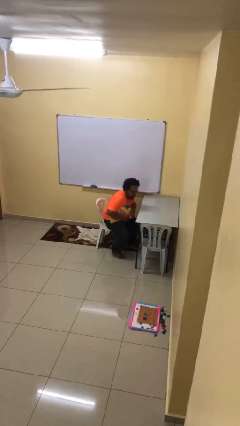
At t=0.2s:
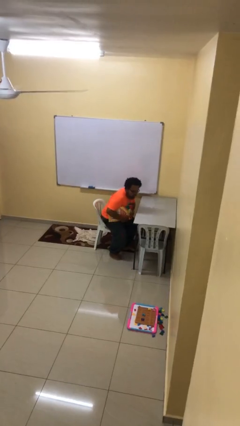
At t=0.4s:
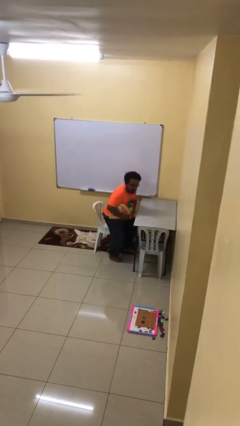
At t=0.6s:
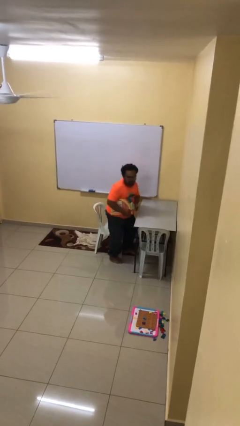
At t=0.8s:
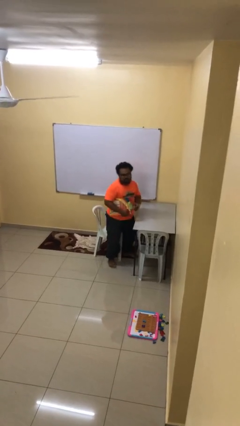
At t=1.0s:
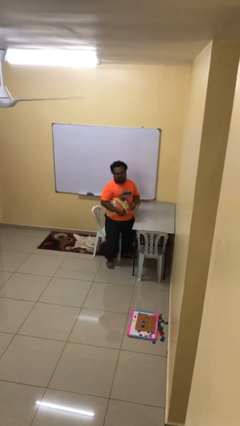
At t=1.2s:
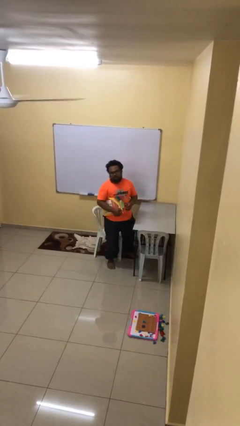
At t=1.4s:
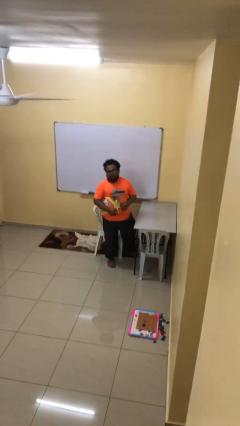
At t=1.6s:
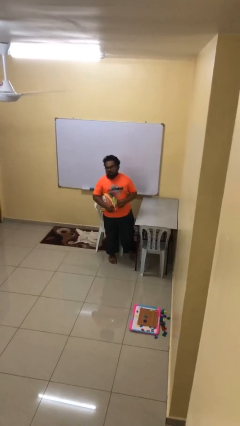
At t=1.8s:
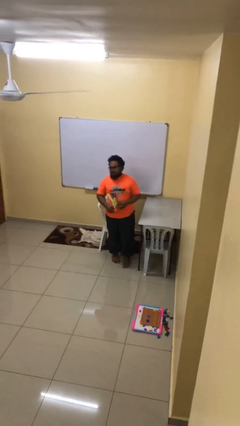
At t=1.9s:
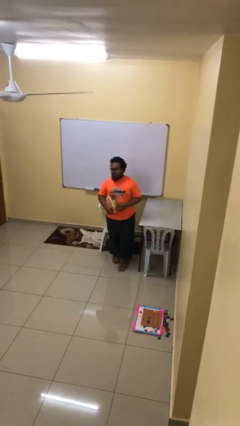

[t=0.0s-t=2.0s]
person stands up

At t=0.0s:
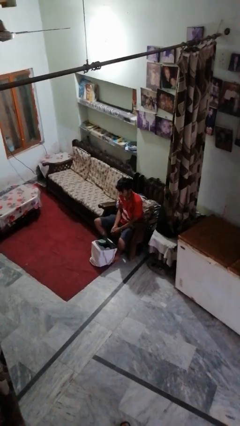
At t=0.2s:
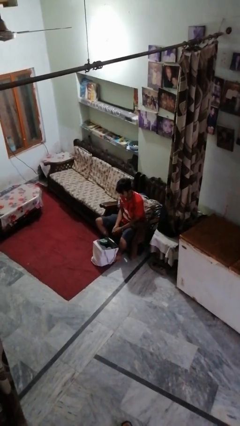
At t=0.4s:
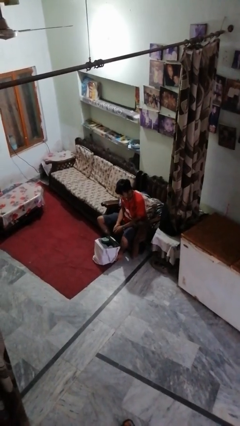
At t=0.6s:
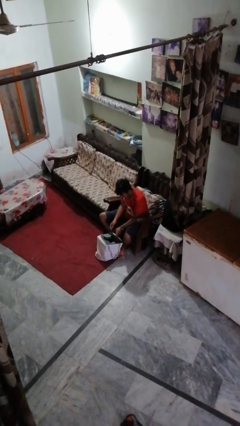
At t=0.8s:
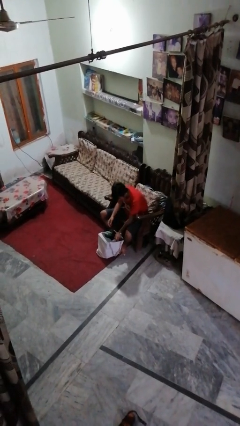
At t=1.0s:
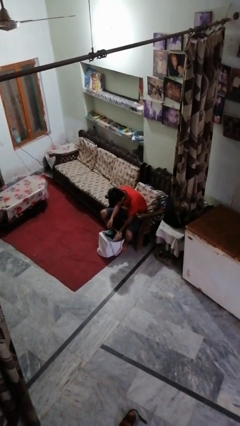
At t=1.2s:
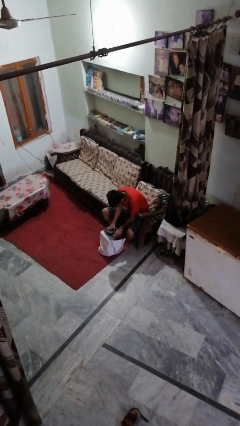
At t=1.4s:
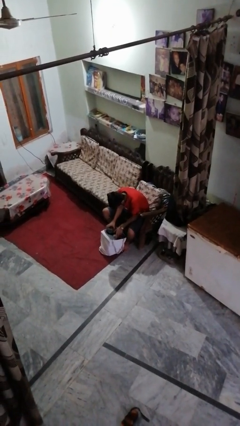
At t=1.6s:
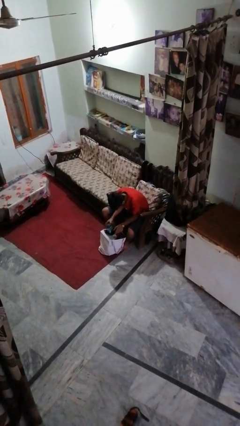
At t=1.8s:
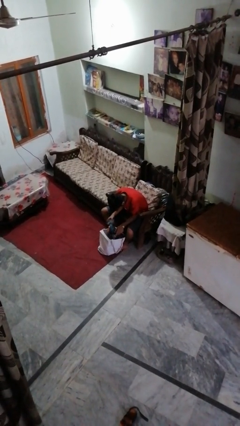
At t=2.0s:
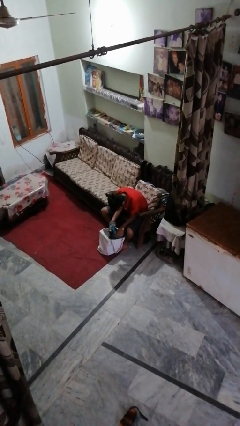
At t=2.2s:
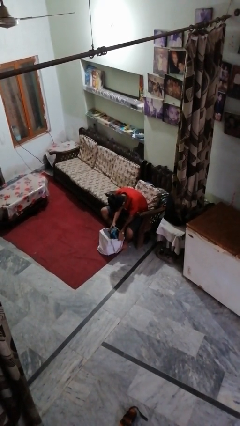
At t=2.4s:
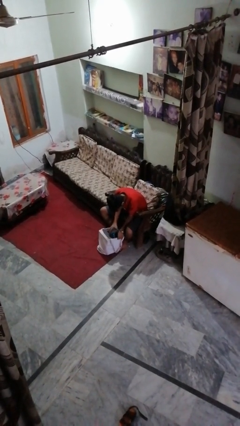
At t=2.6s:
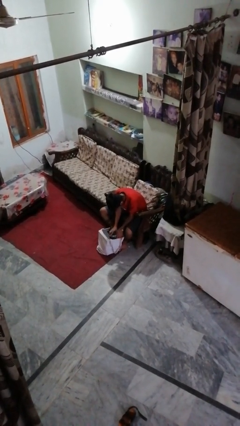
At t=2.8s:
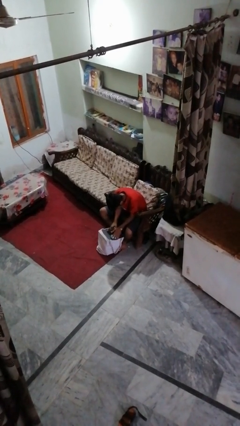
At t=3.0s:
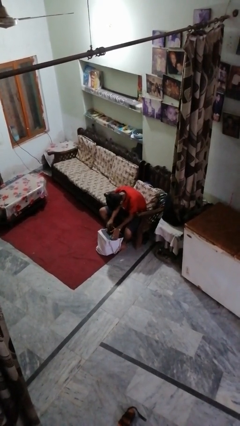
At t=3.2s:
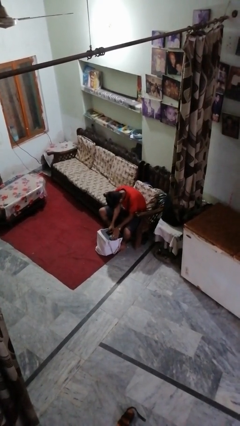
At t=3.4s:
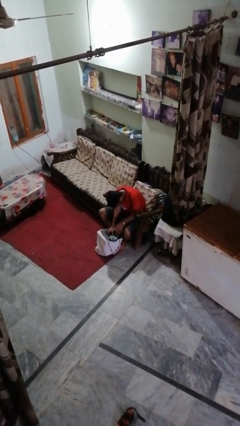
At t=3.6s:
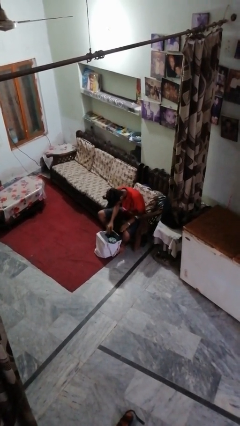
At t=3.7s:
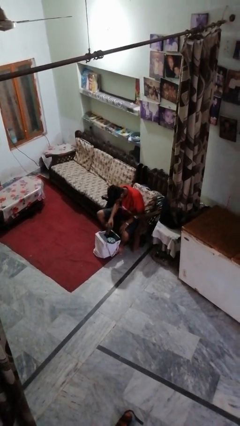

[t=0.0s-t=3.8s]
person searches under bed

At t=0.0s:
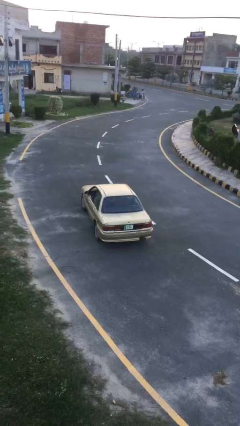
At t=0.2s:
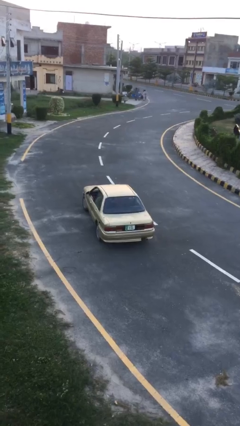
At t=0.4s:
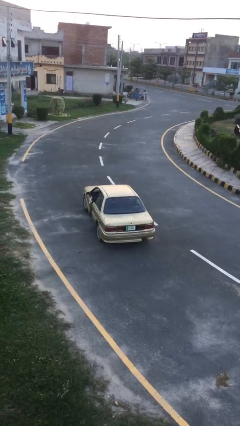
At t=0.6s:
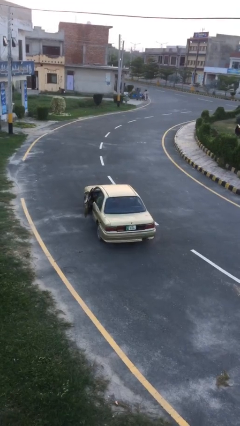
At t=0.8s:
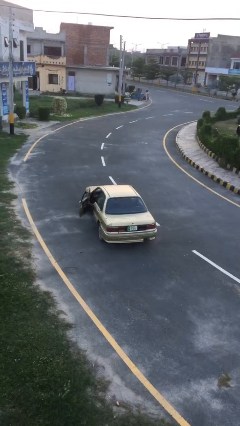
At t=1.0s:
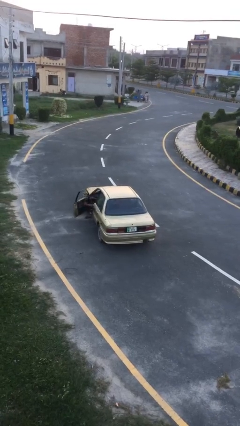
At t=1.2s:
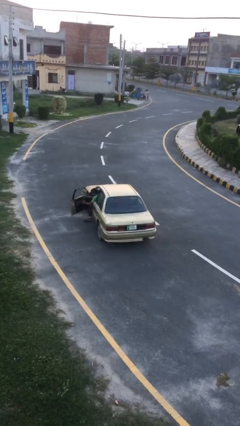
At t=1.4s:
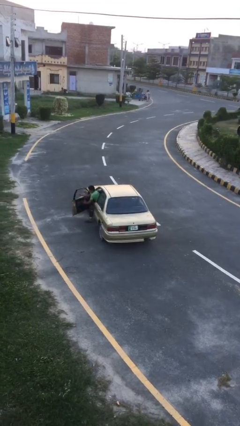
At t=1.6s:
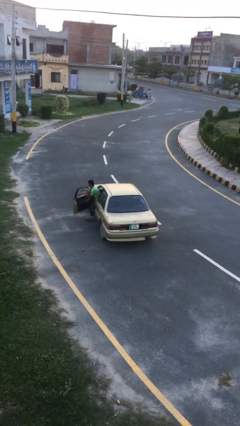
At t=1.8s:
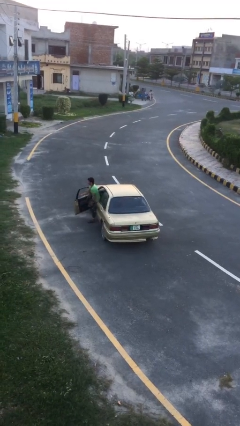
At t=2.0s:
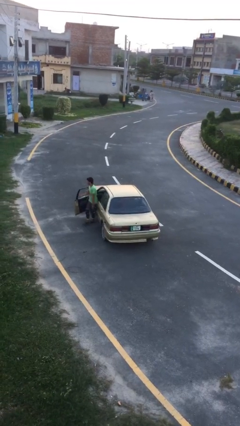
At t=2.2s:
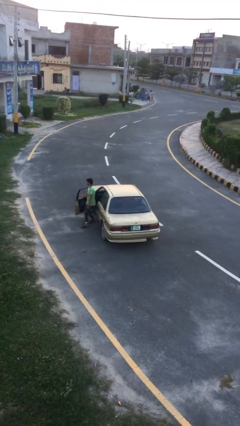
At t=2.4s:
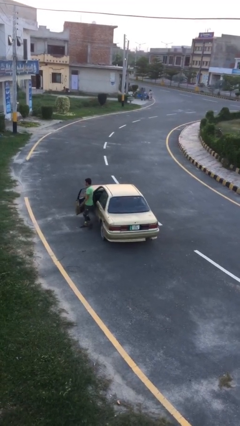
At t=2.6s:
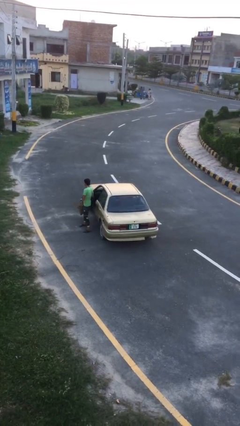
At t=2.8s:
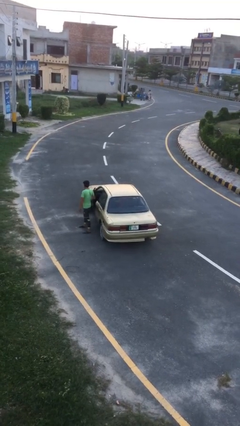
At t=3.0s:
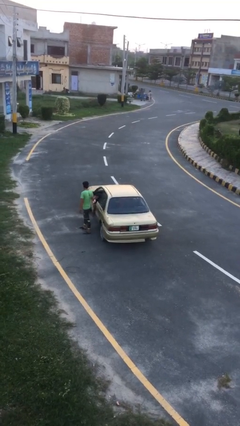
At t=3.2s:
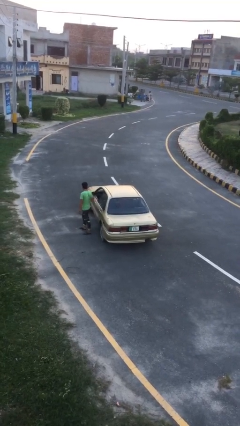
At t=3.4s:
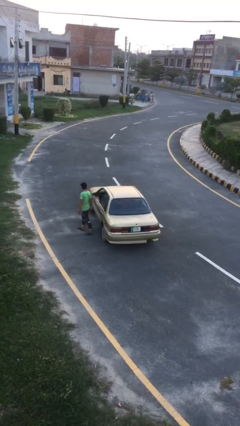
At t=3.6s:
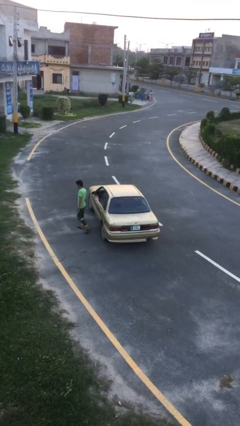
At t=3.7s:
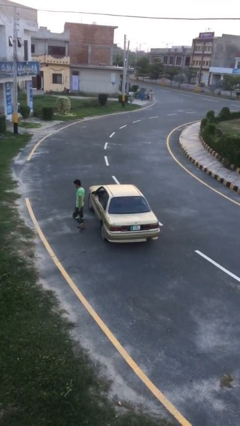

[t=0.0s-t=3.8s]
car drops off person

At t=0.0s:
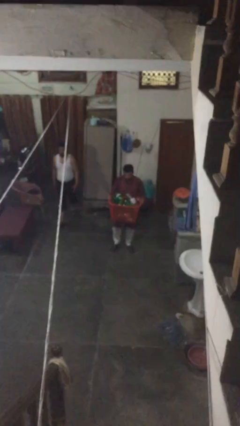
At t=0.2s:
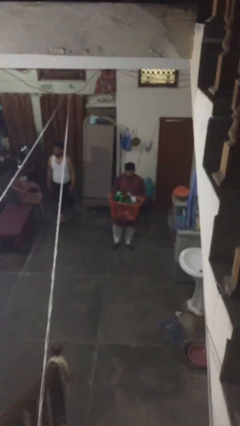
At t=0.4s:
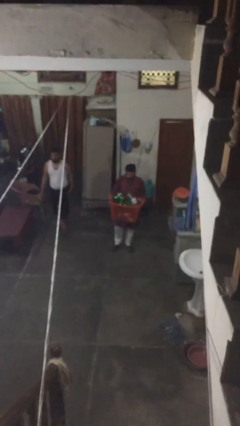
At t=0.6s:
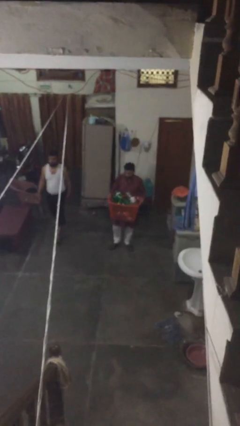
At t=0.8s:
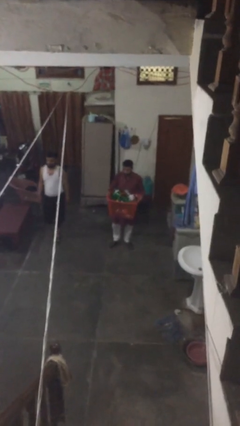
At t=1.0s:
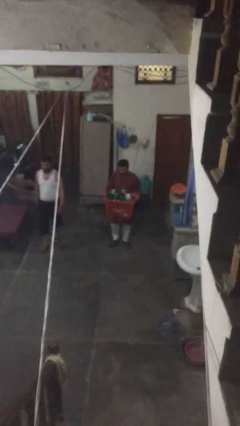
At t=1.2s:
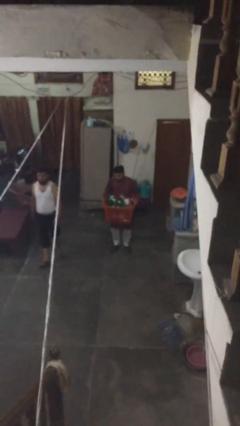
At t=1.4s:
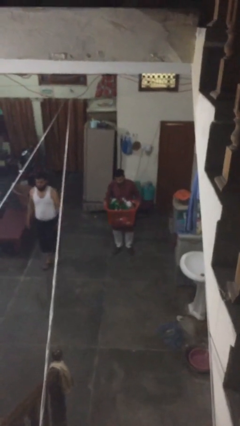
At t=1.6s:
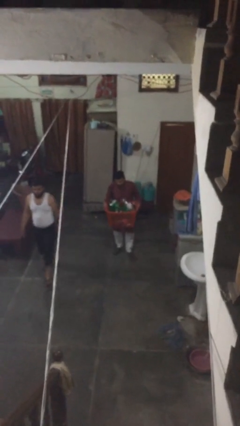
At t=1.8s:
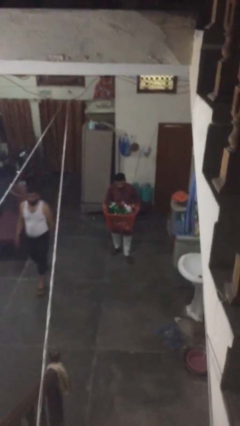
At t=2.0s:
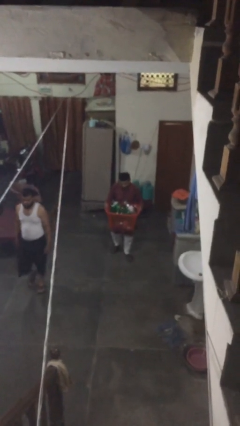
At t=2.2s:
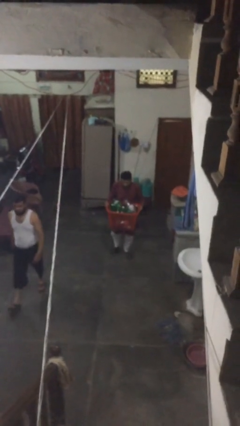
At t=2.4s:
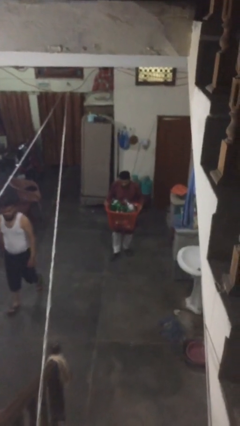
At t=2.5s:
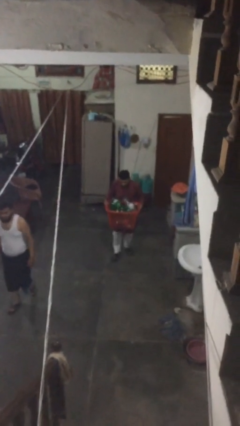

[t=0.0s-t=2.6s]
person carries heavy object

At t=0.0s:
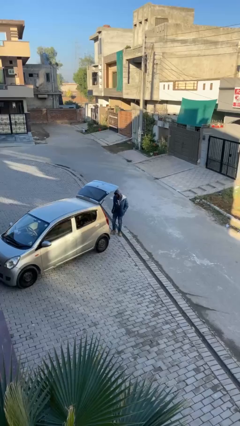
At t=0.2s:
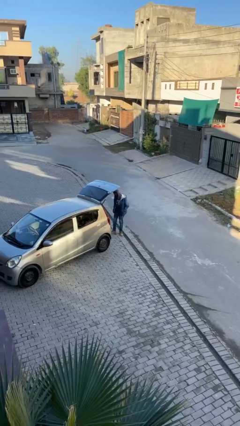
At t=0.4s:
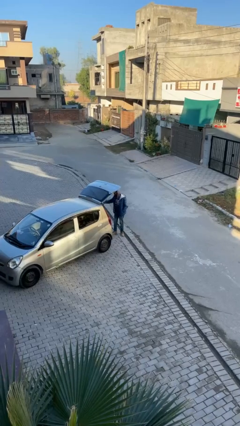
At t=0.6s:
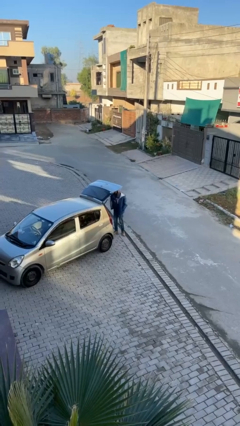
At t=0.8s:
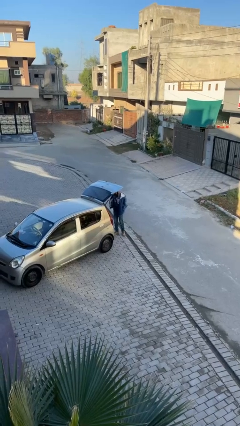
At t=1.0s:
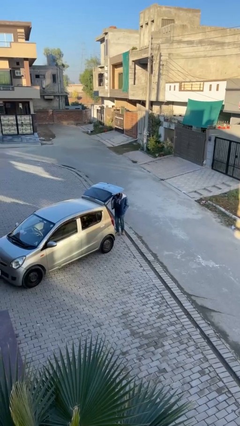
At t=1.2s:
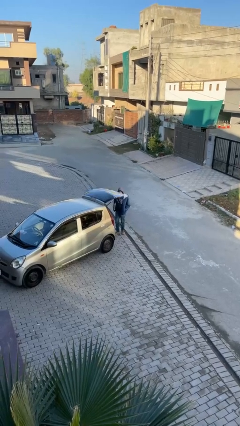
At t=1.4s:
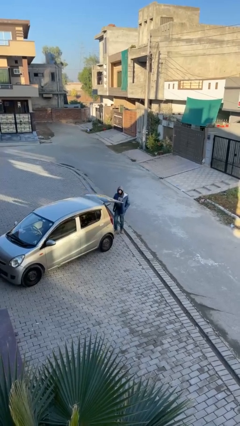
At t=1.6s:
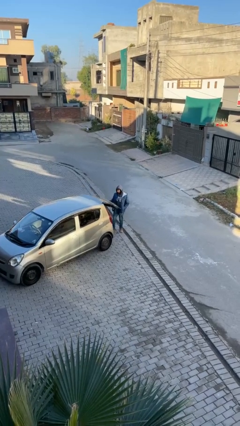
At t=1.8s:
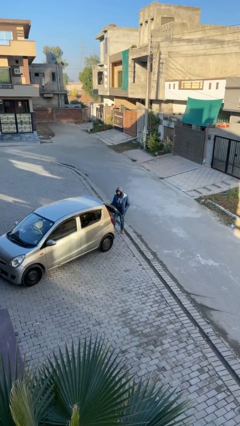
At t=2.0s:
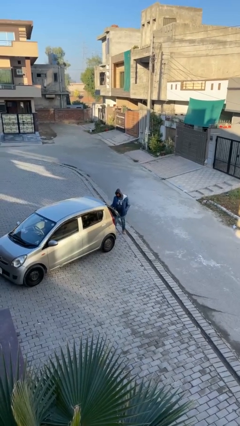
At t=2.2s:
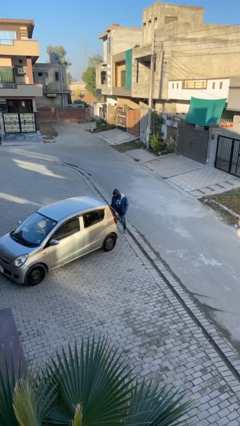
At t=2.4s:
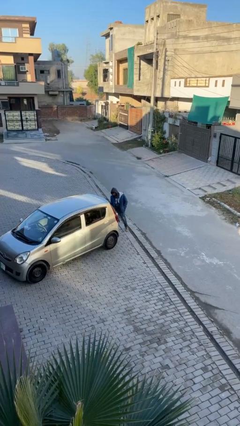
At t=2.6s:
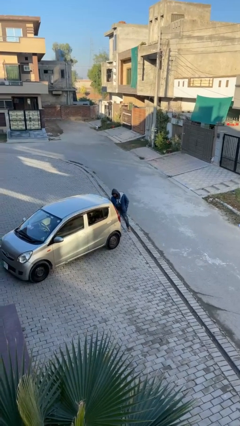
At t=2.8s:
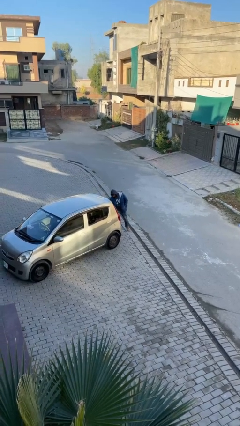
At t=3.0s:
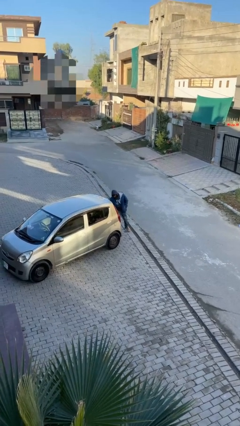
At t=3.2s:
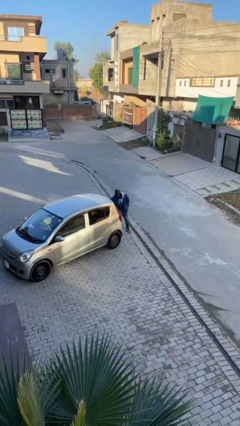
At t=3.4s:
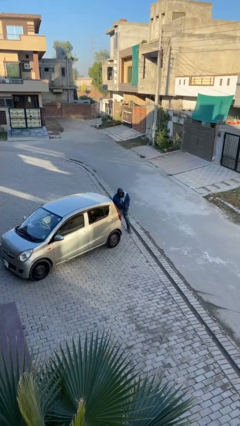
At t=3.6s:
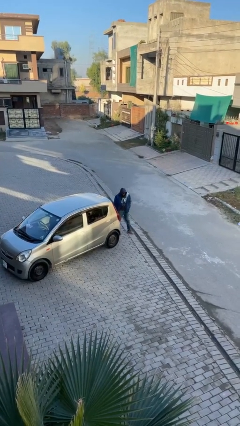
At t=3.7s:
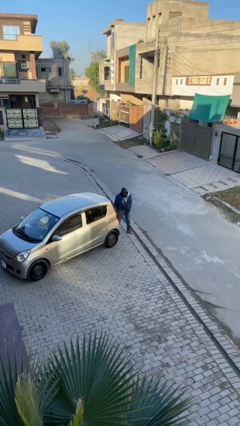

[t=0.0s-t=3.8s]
person closes car trunk

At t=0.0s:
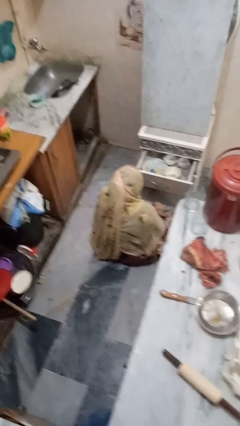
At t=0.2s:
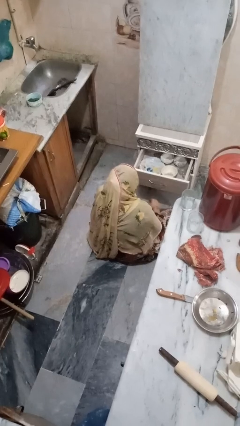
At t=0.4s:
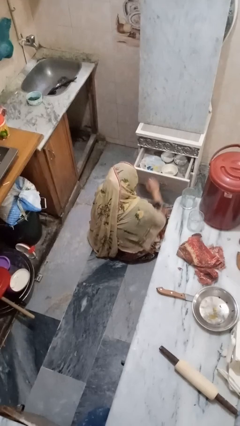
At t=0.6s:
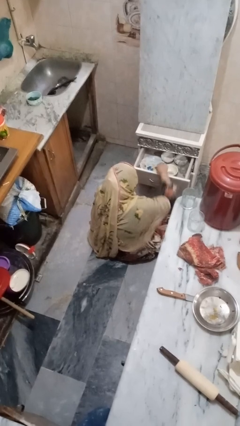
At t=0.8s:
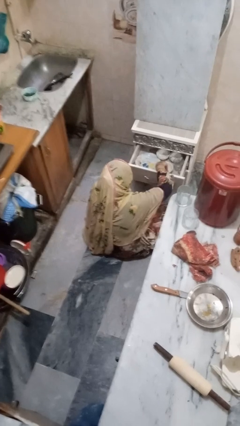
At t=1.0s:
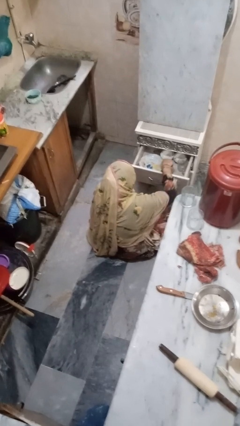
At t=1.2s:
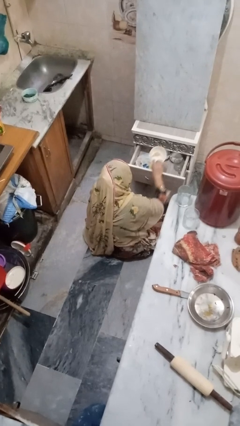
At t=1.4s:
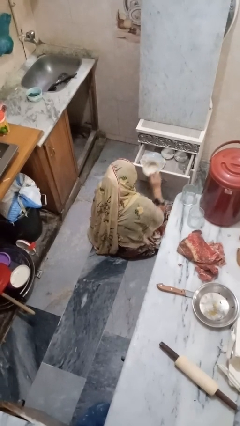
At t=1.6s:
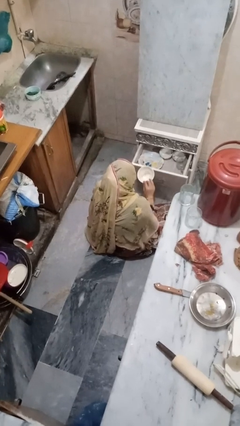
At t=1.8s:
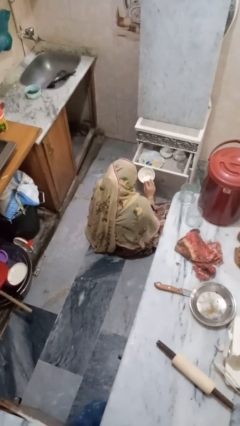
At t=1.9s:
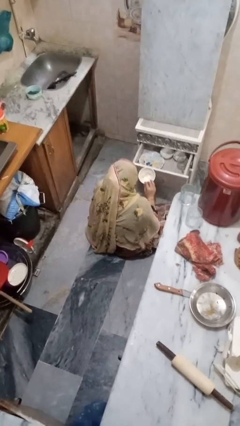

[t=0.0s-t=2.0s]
person takes object from kitchen drawer
